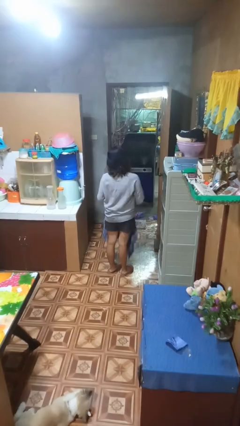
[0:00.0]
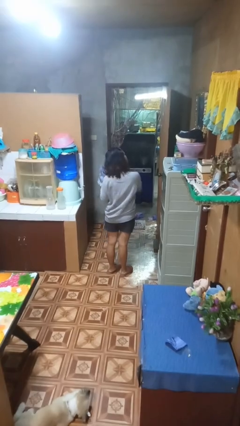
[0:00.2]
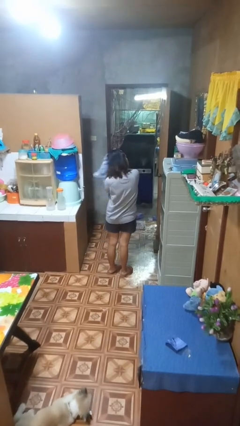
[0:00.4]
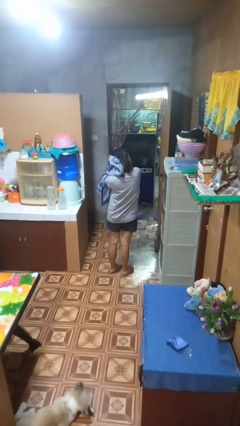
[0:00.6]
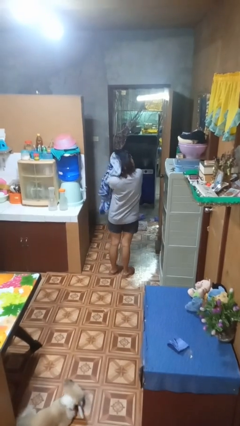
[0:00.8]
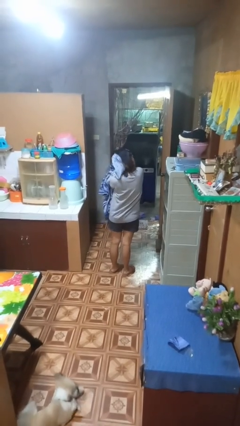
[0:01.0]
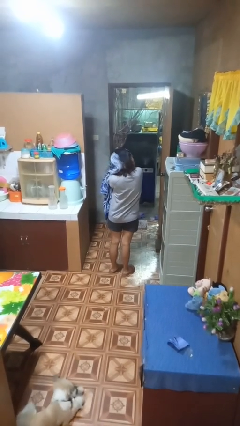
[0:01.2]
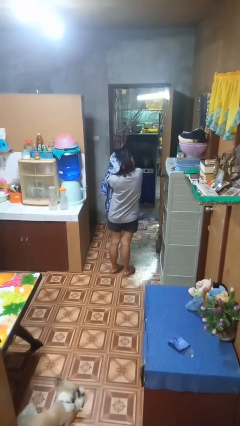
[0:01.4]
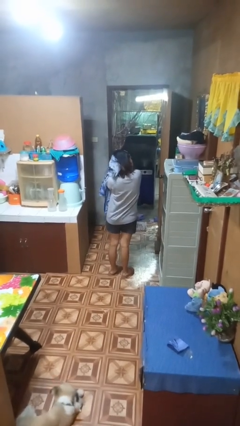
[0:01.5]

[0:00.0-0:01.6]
person dries hair with towel

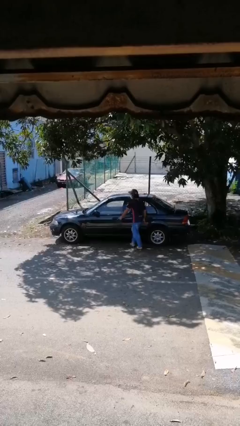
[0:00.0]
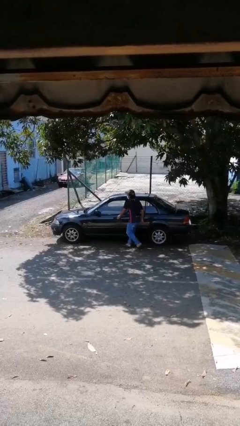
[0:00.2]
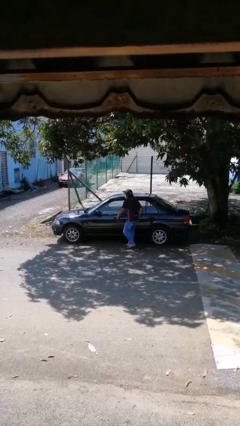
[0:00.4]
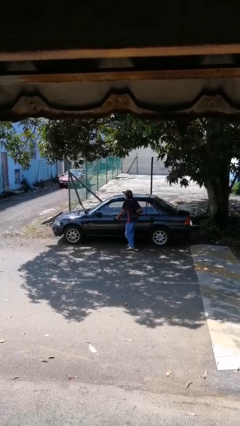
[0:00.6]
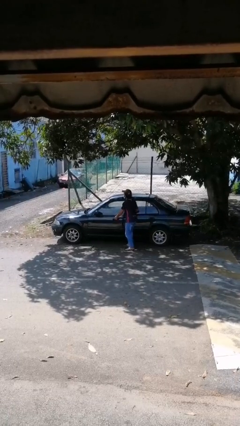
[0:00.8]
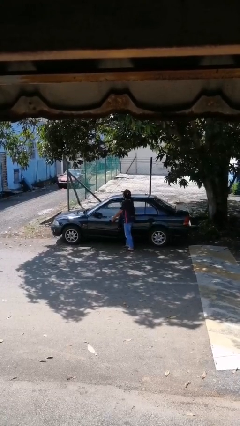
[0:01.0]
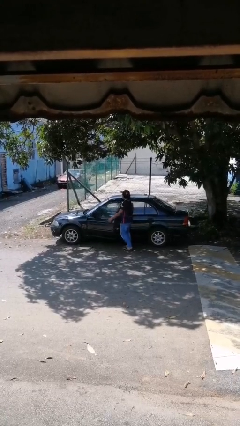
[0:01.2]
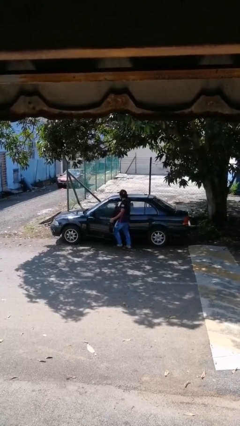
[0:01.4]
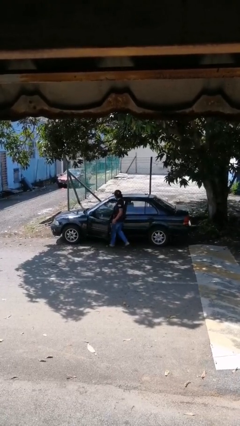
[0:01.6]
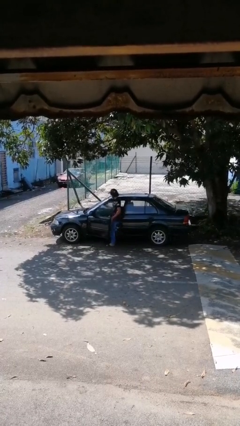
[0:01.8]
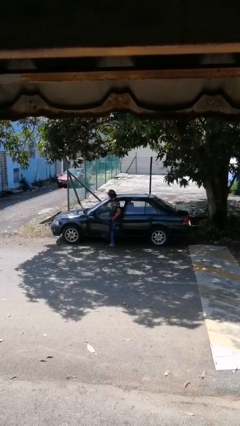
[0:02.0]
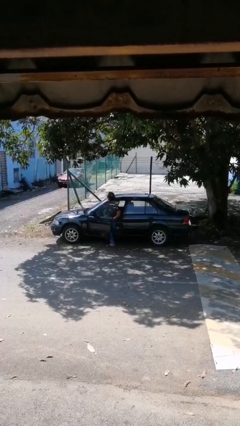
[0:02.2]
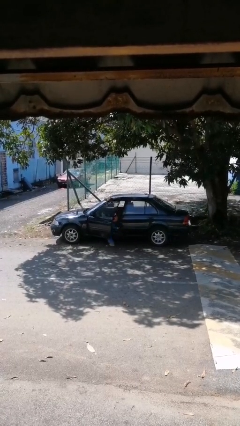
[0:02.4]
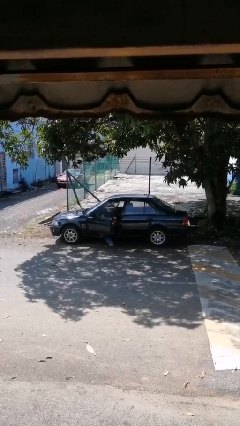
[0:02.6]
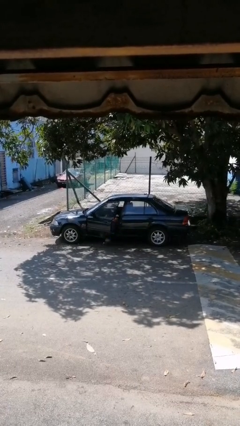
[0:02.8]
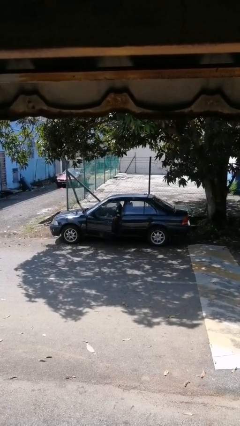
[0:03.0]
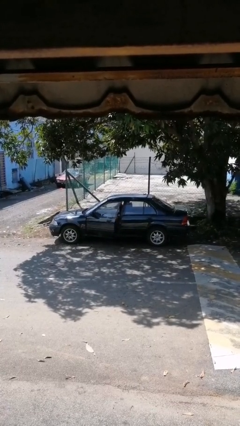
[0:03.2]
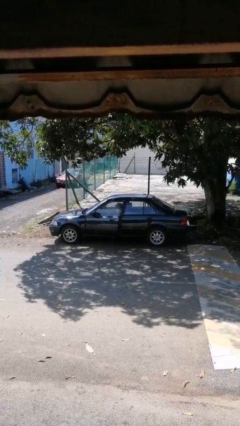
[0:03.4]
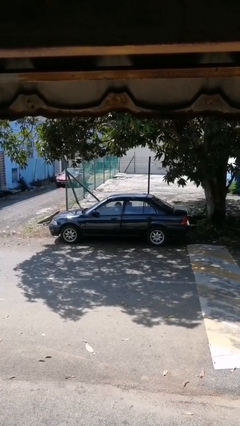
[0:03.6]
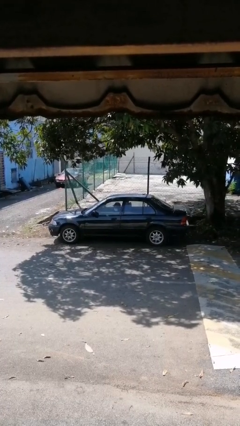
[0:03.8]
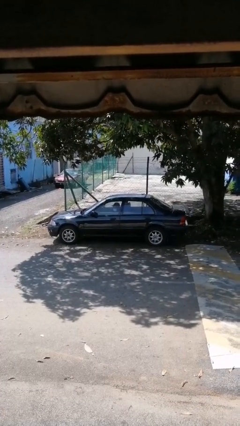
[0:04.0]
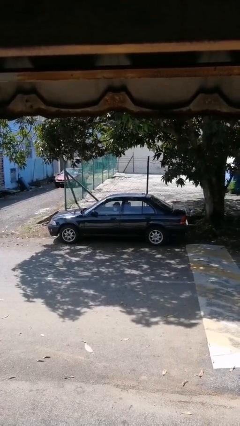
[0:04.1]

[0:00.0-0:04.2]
car picks up person

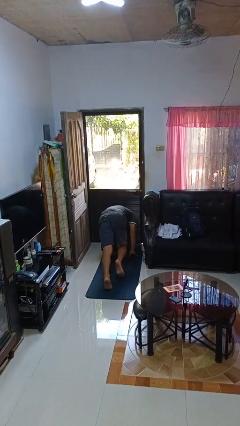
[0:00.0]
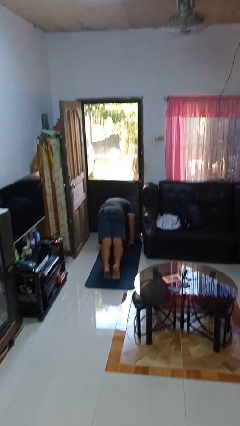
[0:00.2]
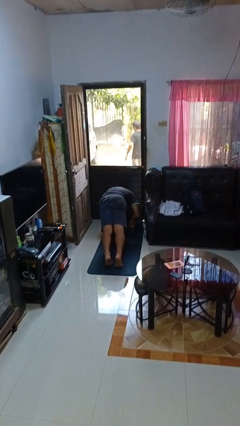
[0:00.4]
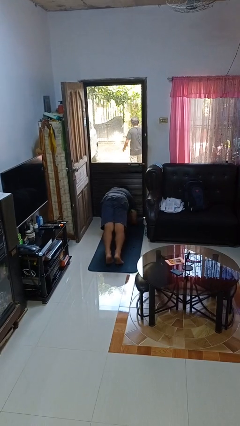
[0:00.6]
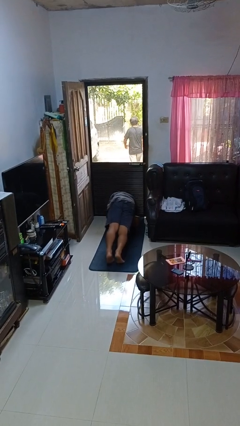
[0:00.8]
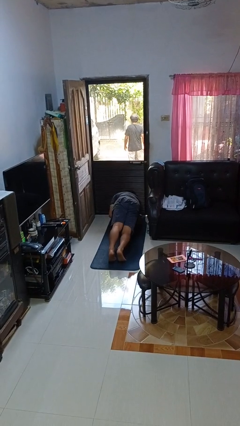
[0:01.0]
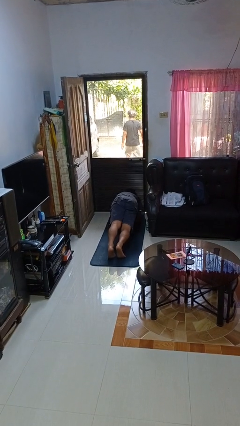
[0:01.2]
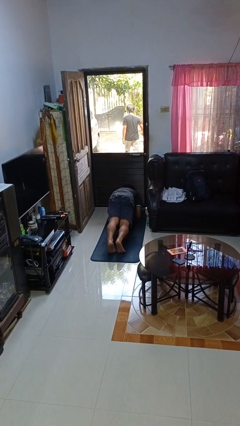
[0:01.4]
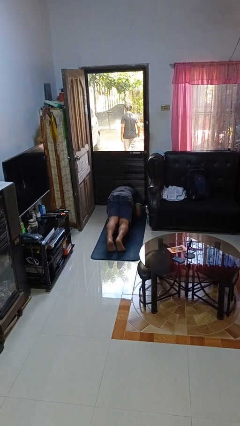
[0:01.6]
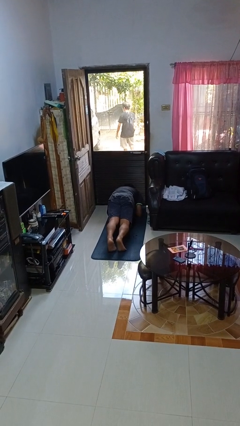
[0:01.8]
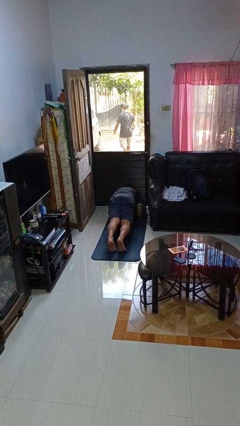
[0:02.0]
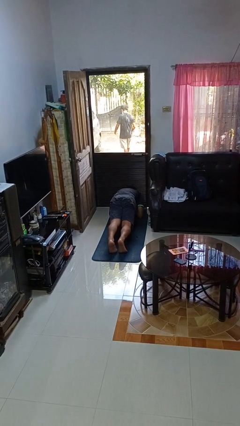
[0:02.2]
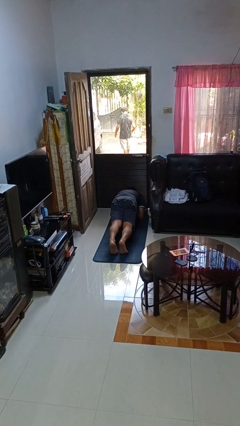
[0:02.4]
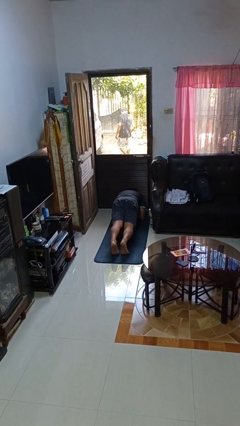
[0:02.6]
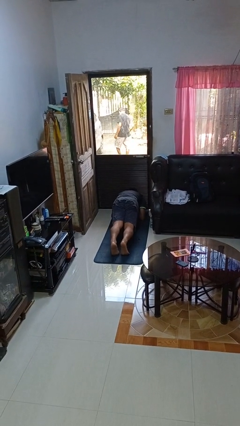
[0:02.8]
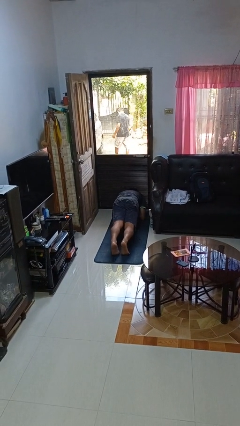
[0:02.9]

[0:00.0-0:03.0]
person exercises with plank

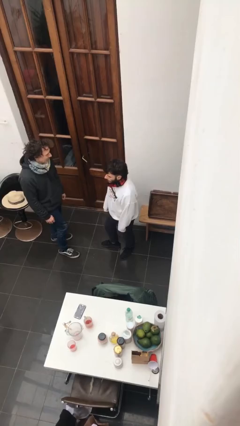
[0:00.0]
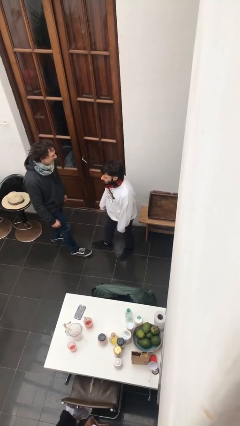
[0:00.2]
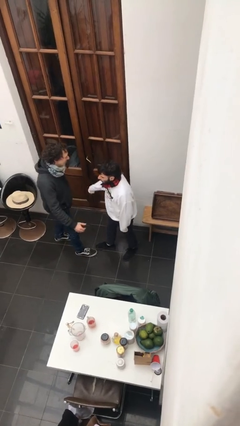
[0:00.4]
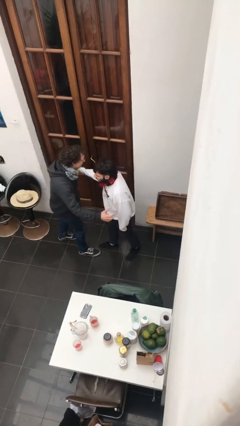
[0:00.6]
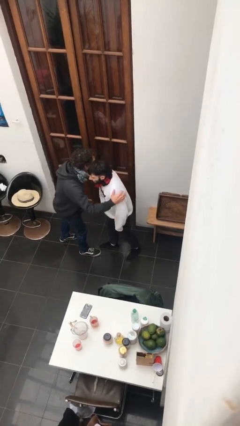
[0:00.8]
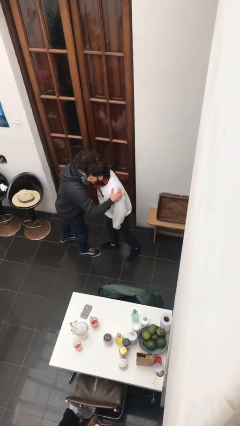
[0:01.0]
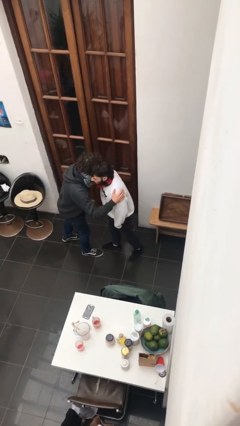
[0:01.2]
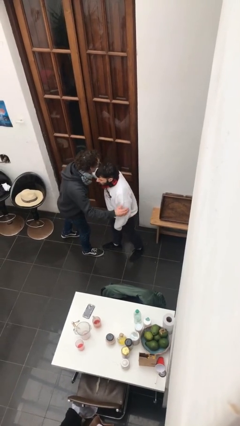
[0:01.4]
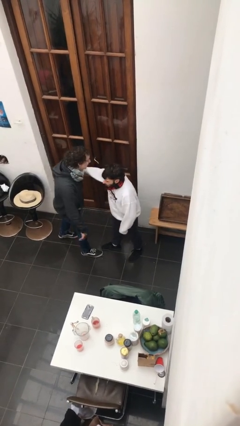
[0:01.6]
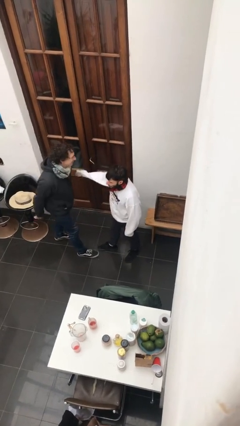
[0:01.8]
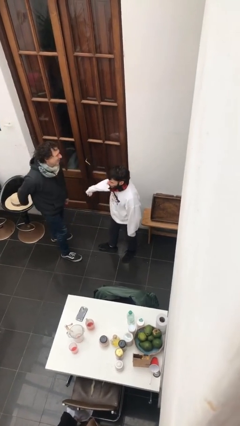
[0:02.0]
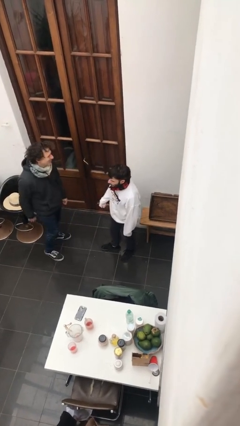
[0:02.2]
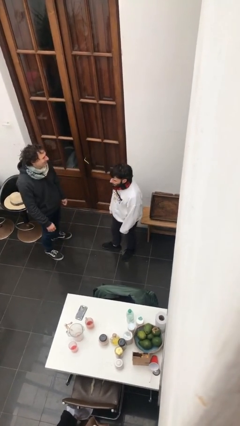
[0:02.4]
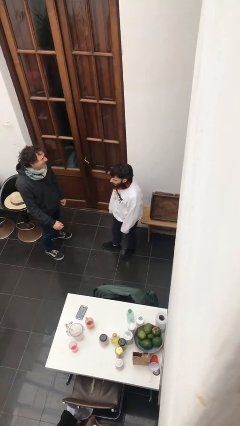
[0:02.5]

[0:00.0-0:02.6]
person kisses cheek of person

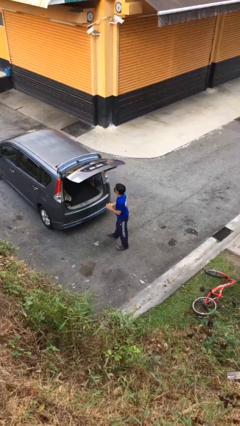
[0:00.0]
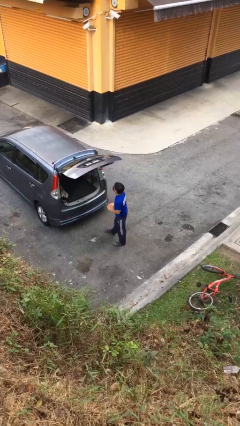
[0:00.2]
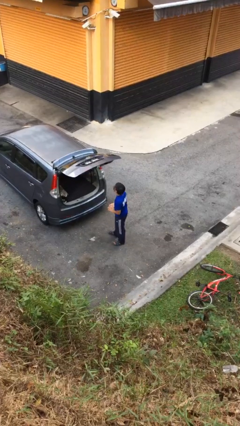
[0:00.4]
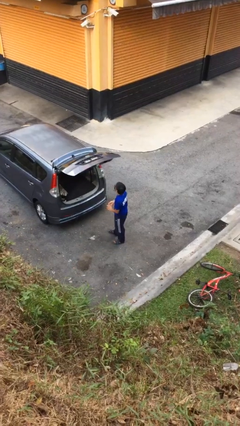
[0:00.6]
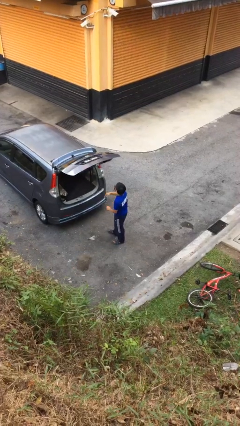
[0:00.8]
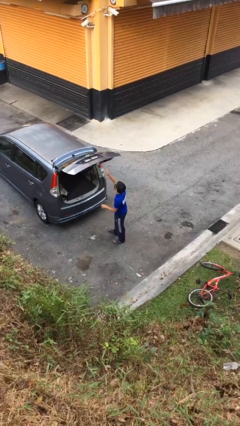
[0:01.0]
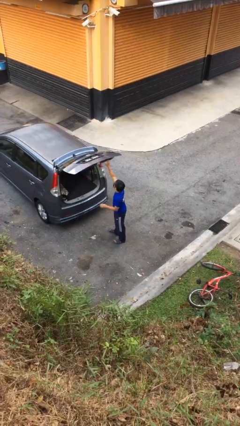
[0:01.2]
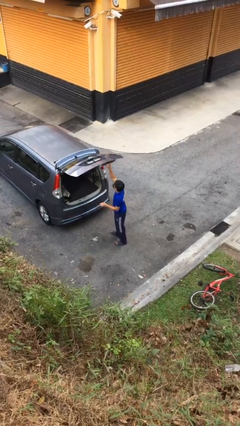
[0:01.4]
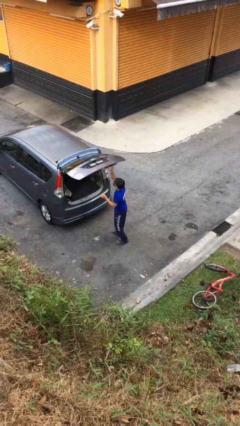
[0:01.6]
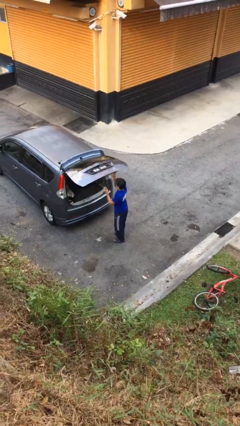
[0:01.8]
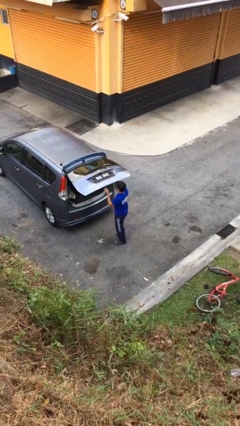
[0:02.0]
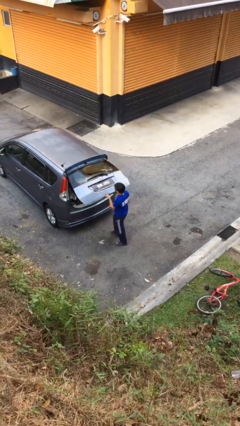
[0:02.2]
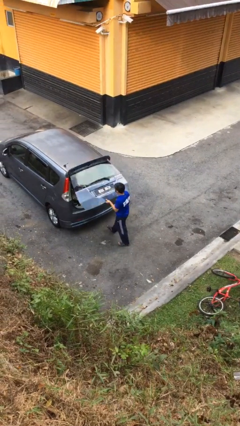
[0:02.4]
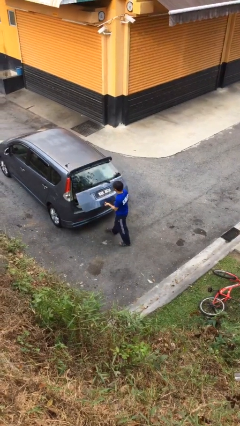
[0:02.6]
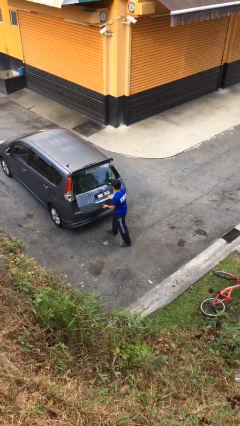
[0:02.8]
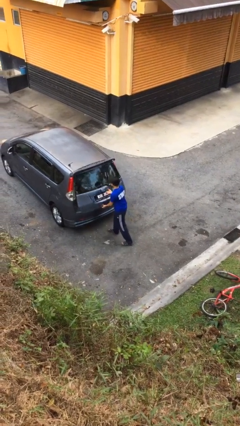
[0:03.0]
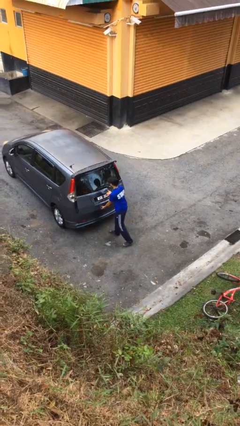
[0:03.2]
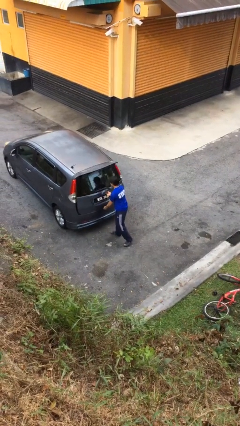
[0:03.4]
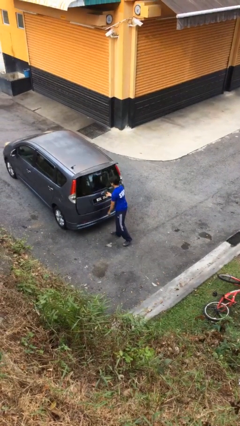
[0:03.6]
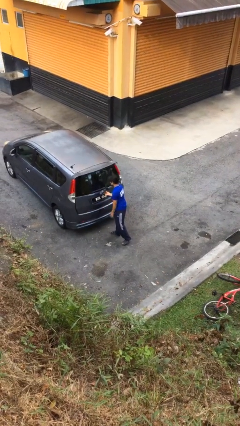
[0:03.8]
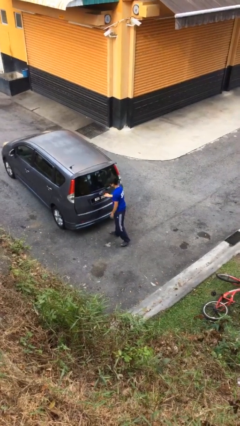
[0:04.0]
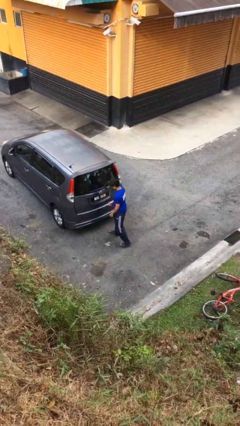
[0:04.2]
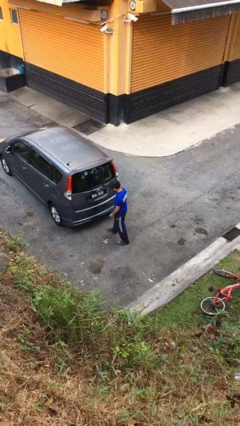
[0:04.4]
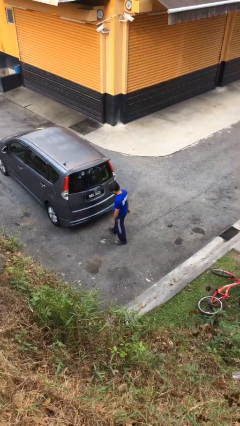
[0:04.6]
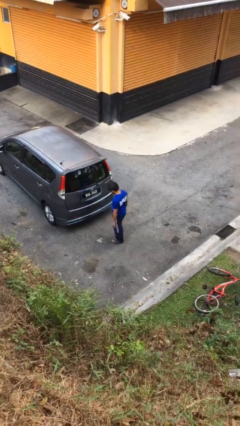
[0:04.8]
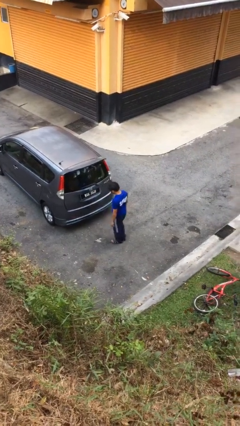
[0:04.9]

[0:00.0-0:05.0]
person closes car trunk

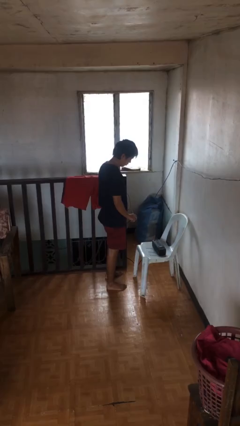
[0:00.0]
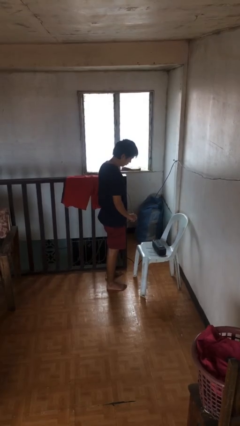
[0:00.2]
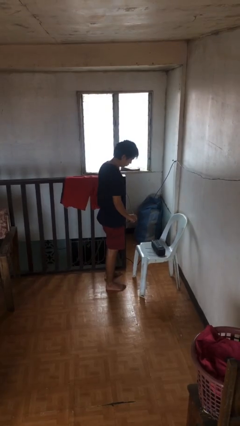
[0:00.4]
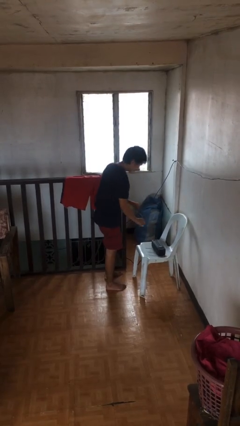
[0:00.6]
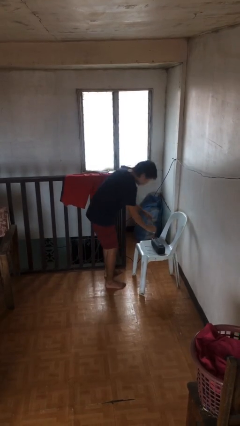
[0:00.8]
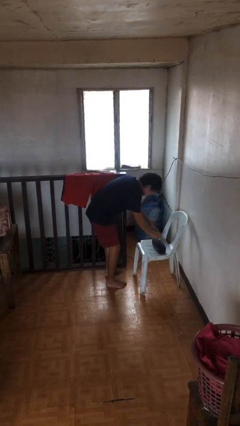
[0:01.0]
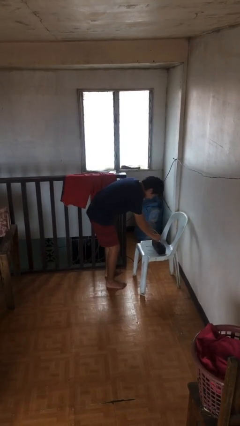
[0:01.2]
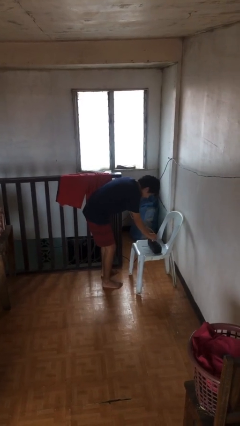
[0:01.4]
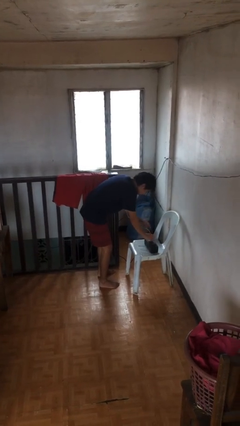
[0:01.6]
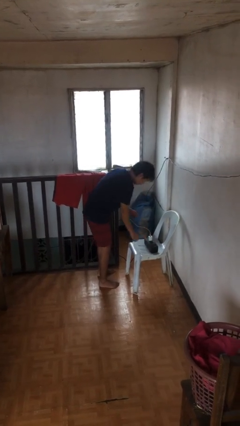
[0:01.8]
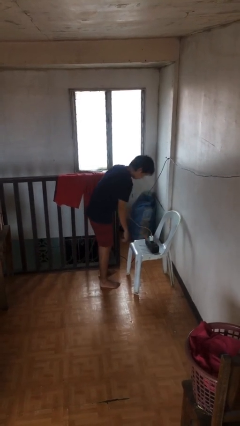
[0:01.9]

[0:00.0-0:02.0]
person plugs into electrical socket
